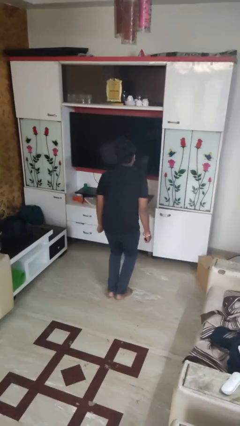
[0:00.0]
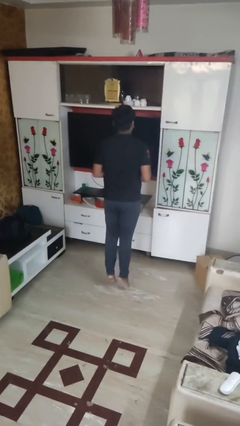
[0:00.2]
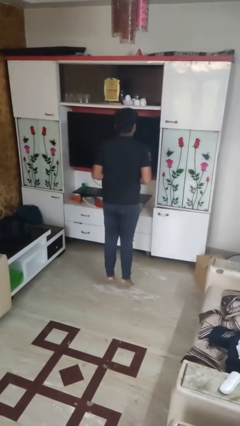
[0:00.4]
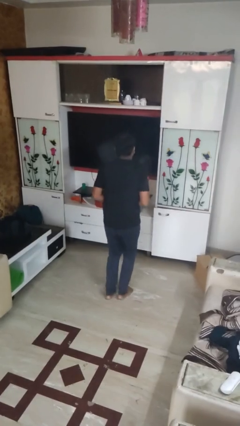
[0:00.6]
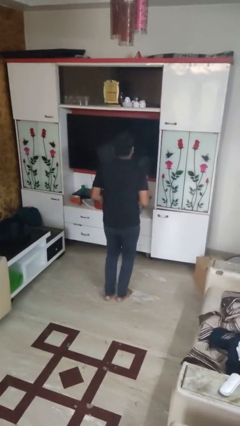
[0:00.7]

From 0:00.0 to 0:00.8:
person jumps

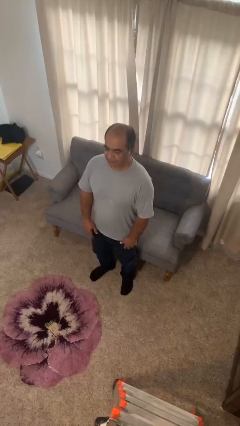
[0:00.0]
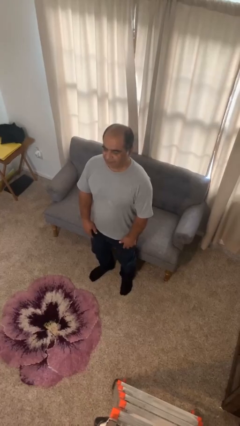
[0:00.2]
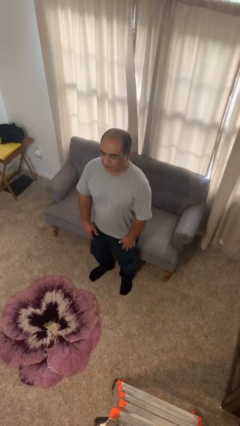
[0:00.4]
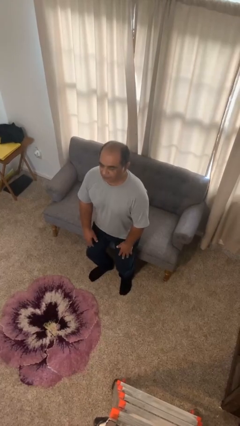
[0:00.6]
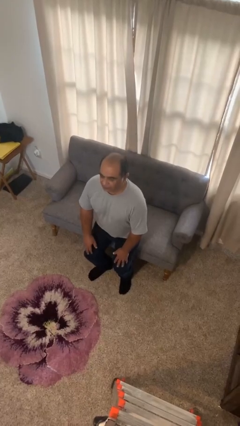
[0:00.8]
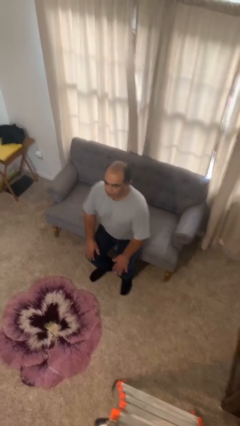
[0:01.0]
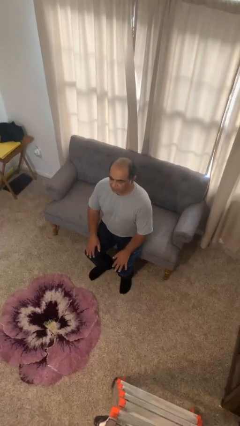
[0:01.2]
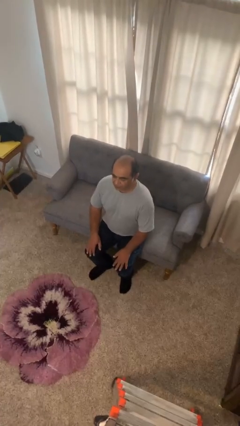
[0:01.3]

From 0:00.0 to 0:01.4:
person sits down

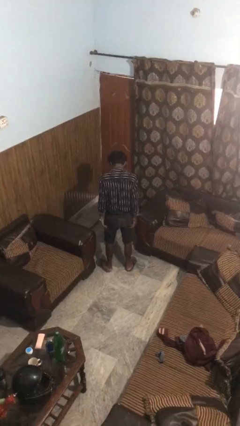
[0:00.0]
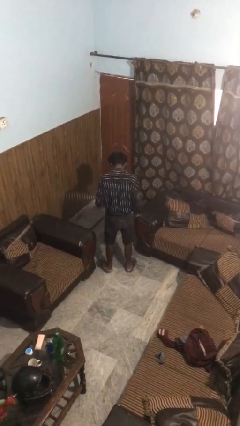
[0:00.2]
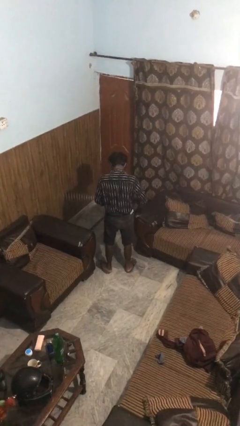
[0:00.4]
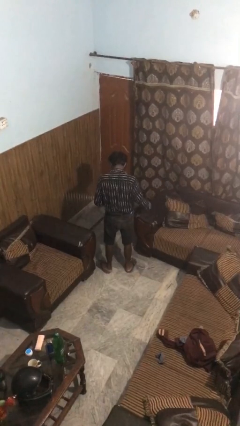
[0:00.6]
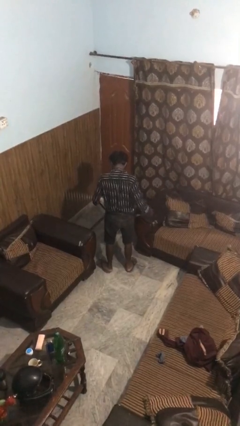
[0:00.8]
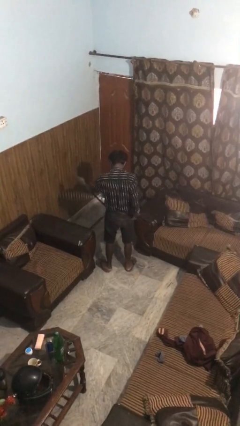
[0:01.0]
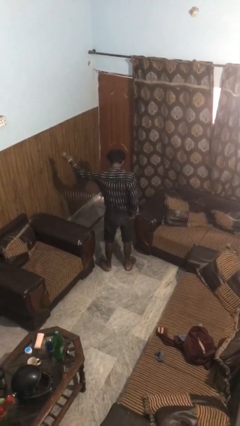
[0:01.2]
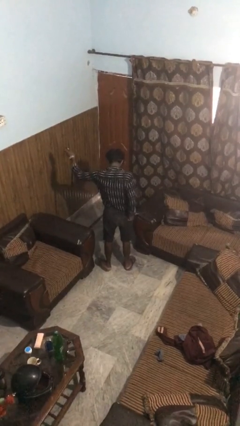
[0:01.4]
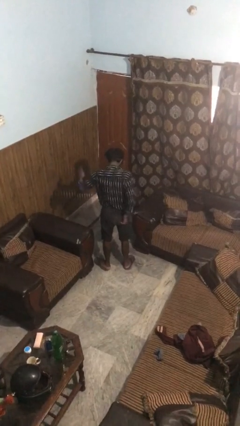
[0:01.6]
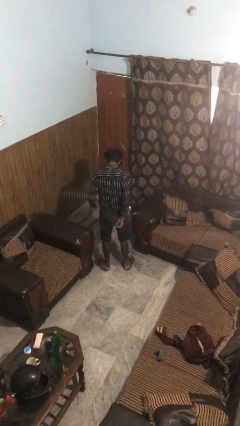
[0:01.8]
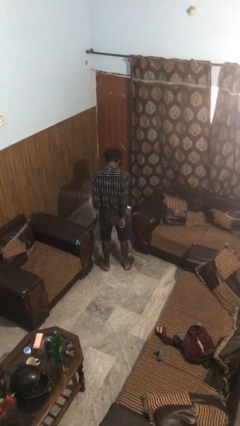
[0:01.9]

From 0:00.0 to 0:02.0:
person takes off belt

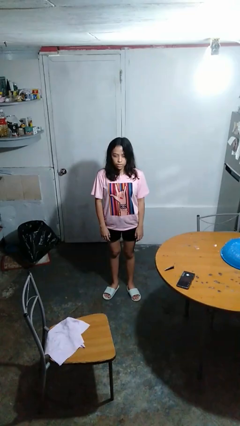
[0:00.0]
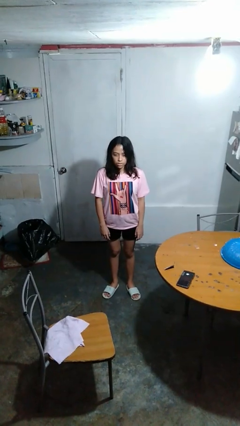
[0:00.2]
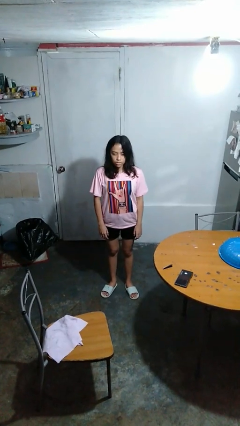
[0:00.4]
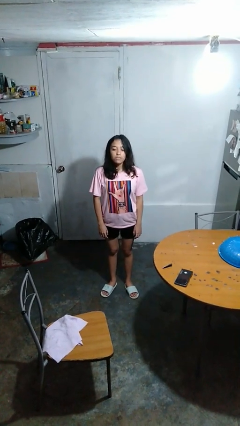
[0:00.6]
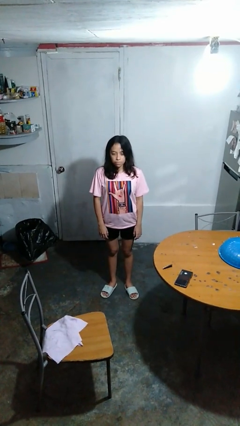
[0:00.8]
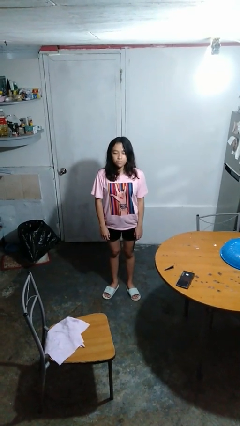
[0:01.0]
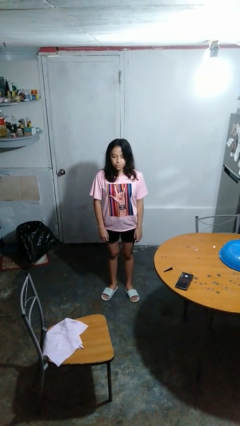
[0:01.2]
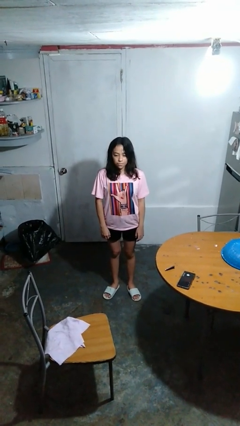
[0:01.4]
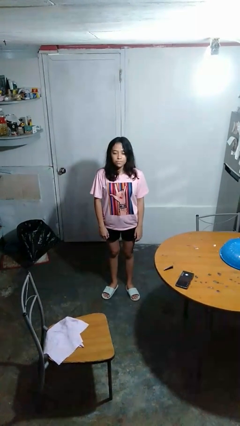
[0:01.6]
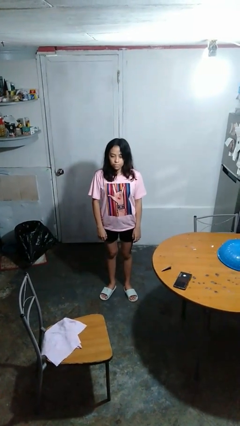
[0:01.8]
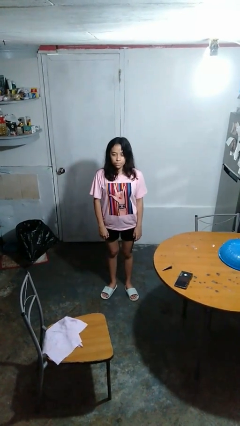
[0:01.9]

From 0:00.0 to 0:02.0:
person nods head

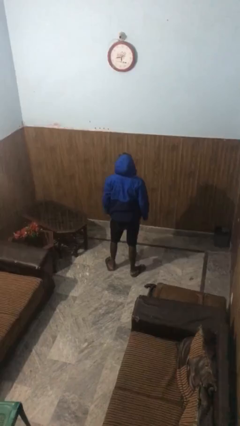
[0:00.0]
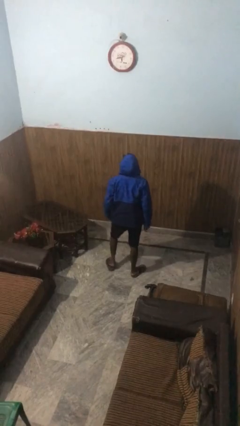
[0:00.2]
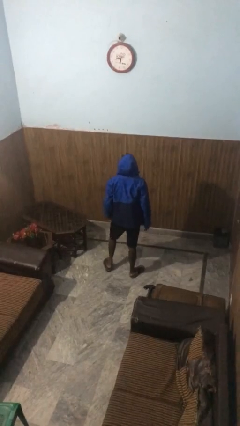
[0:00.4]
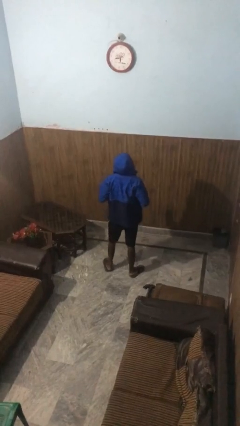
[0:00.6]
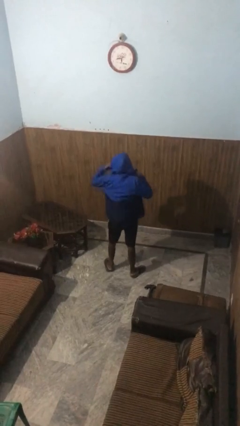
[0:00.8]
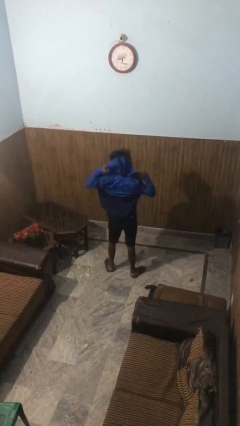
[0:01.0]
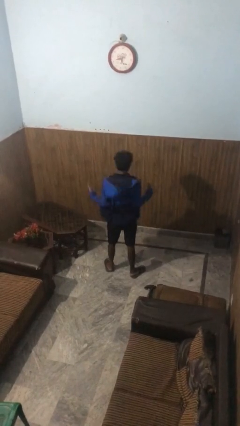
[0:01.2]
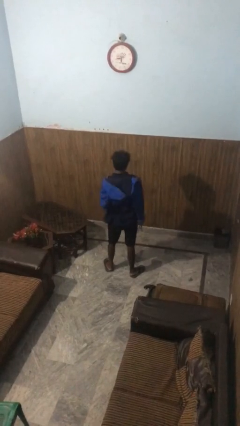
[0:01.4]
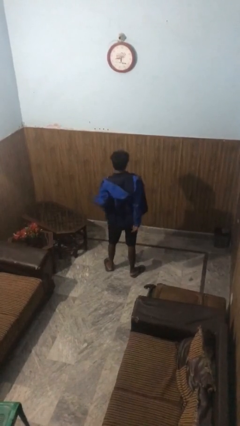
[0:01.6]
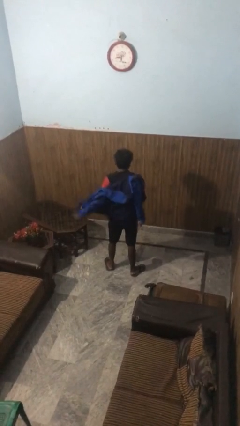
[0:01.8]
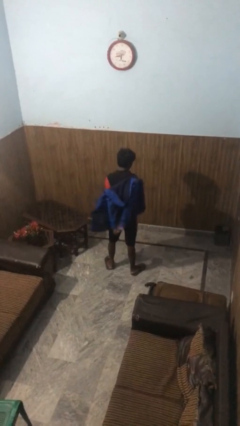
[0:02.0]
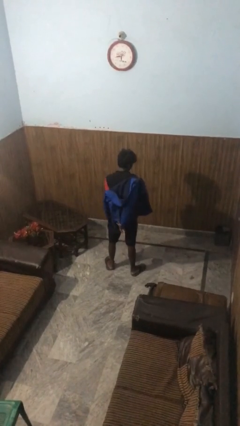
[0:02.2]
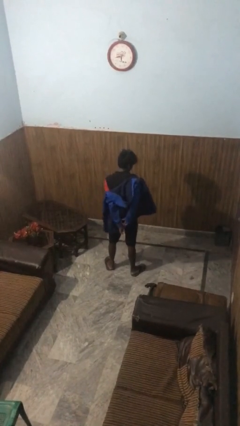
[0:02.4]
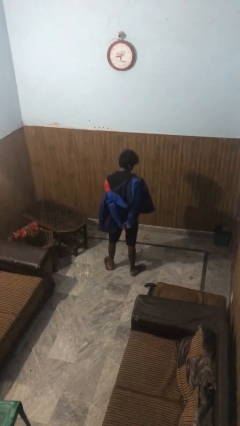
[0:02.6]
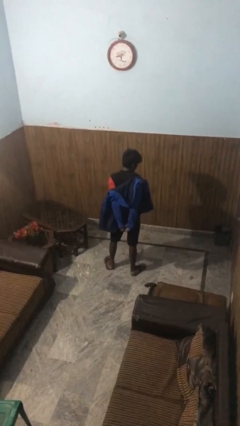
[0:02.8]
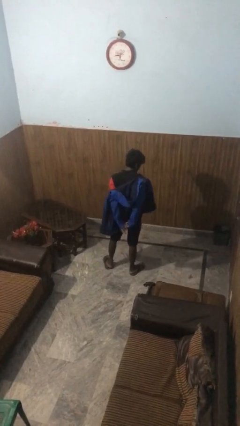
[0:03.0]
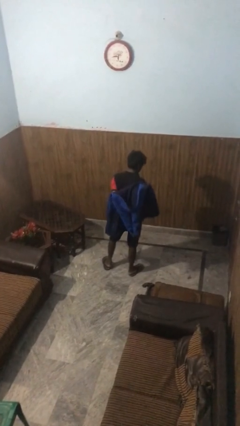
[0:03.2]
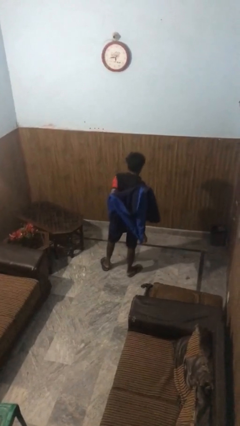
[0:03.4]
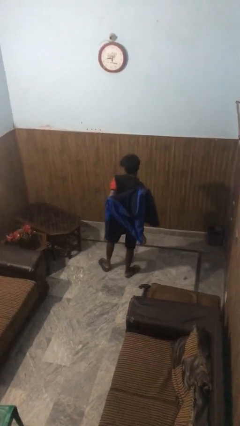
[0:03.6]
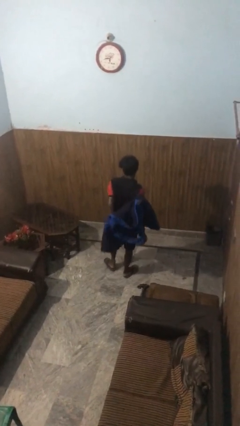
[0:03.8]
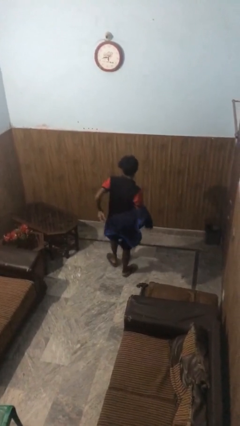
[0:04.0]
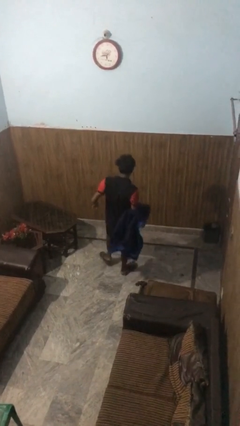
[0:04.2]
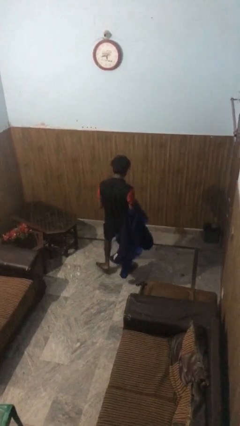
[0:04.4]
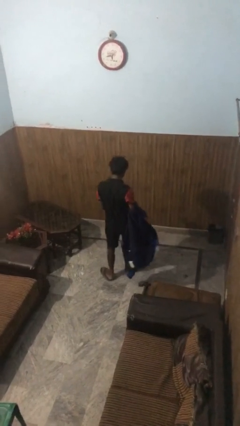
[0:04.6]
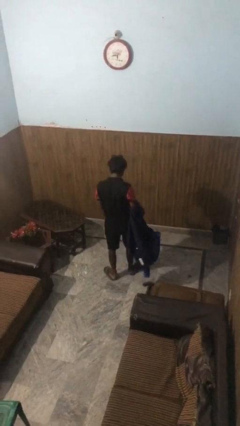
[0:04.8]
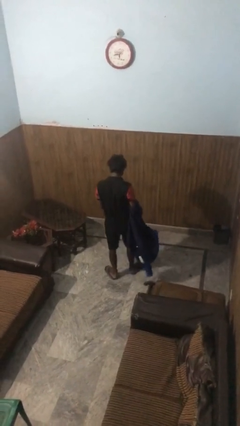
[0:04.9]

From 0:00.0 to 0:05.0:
person takes off hoodie

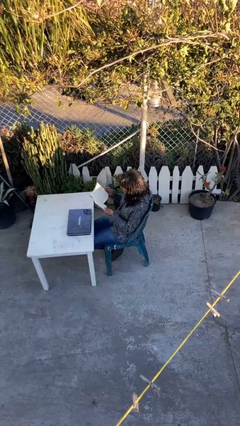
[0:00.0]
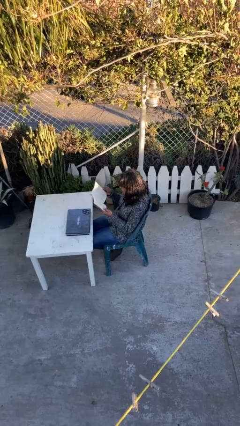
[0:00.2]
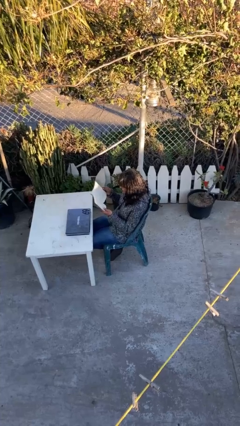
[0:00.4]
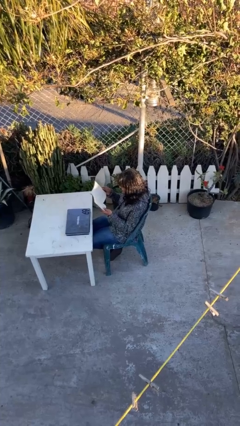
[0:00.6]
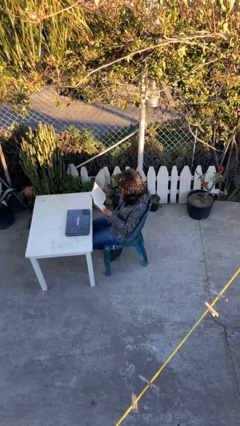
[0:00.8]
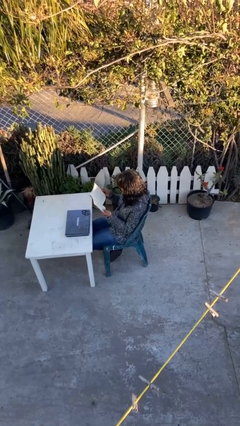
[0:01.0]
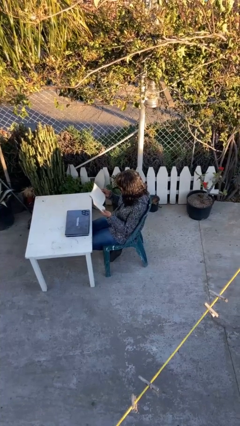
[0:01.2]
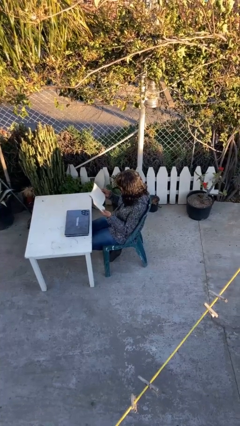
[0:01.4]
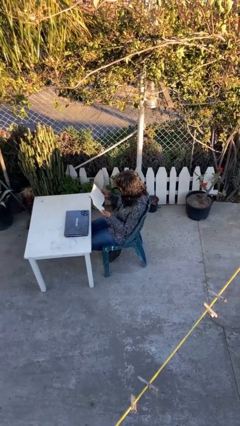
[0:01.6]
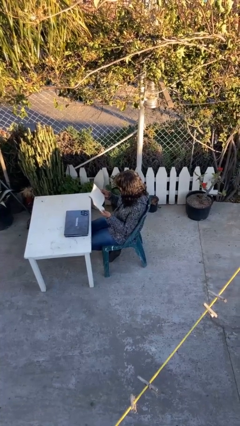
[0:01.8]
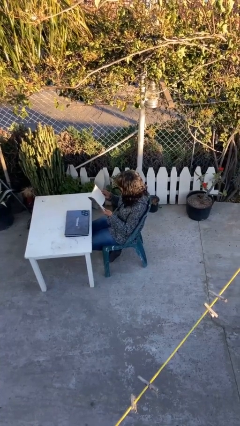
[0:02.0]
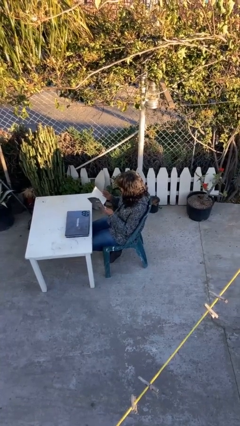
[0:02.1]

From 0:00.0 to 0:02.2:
person reads document

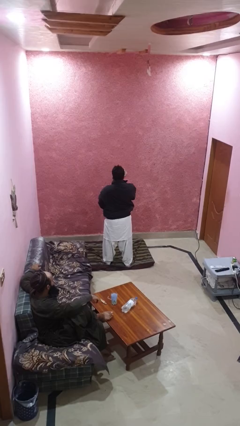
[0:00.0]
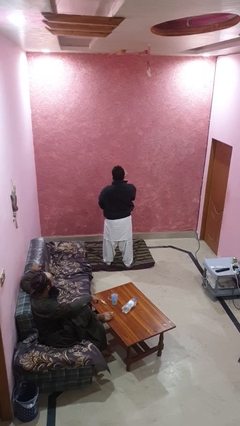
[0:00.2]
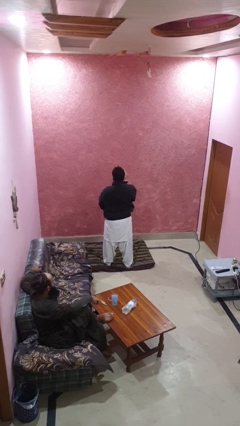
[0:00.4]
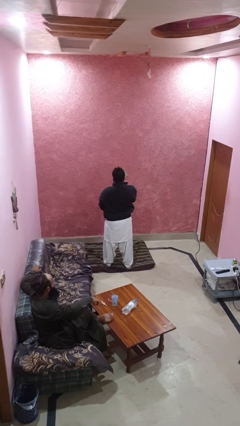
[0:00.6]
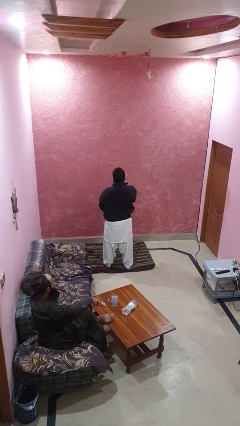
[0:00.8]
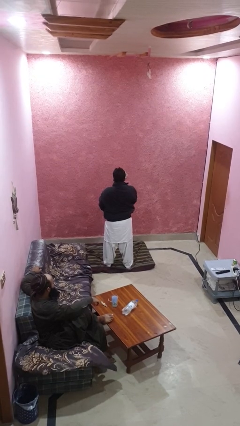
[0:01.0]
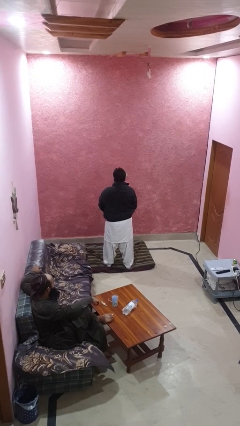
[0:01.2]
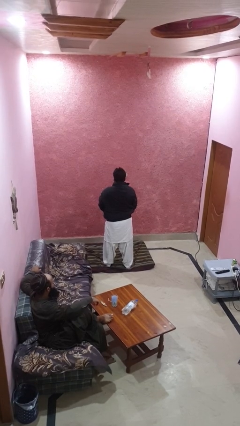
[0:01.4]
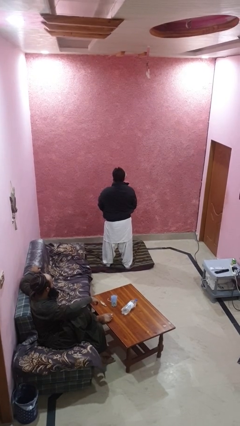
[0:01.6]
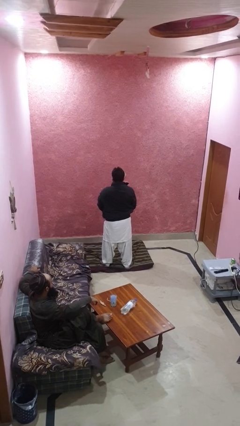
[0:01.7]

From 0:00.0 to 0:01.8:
person unzips jacket

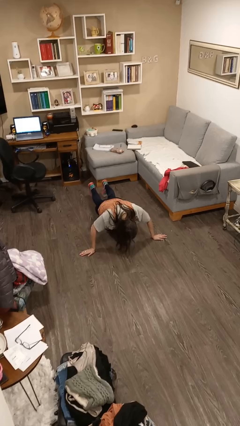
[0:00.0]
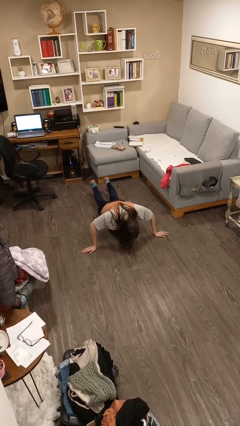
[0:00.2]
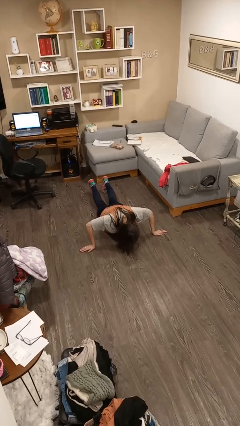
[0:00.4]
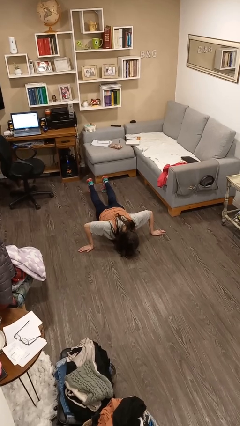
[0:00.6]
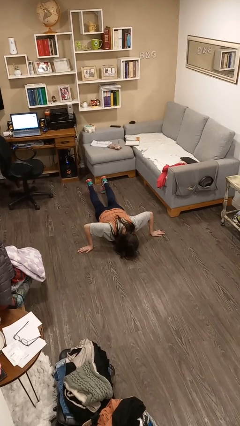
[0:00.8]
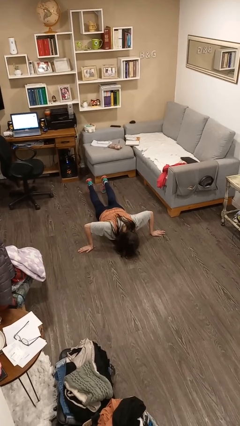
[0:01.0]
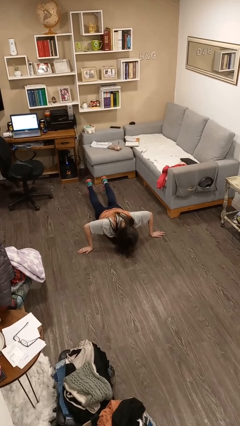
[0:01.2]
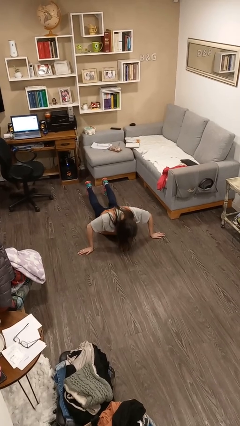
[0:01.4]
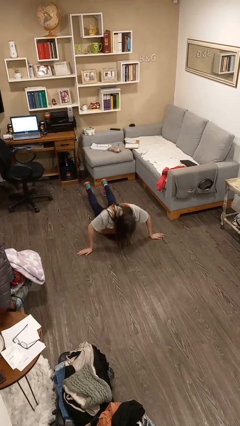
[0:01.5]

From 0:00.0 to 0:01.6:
person exercises with pushup
